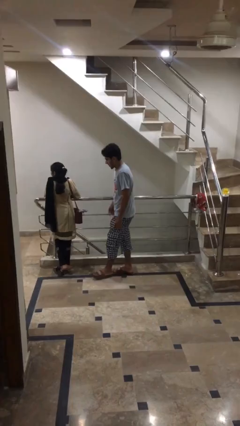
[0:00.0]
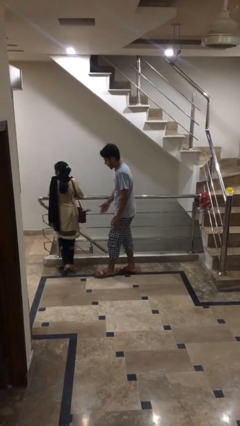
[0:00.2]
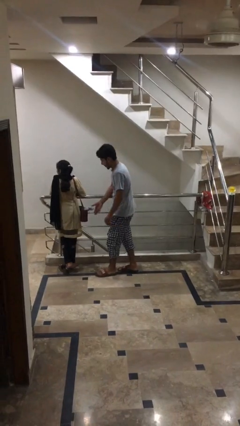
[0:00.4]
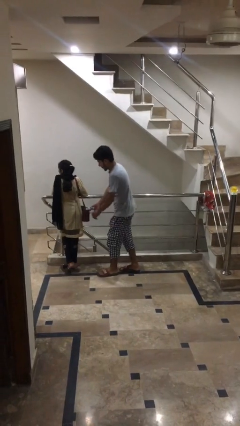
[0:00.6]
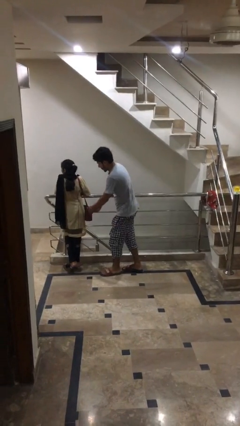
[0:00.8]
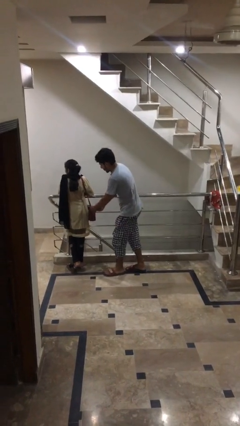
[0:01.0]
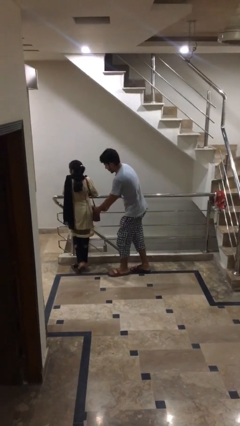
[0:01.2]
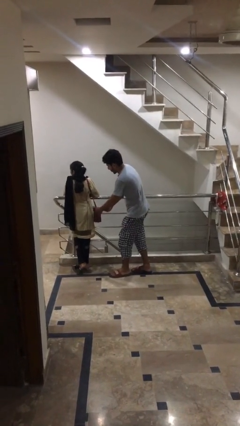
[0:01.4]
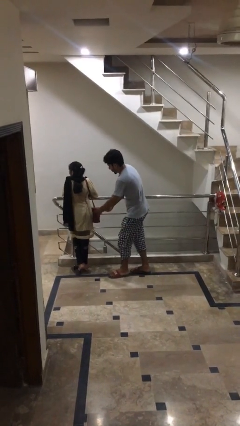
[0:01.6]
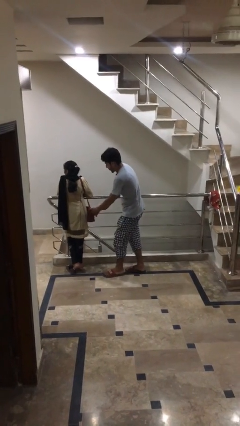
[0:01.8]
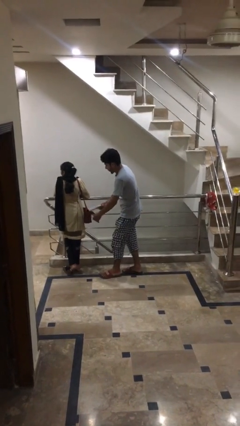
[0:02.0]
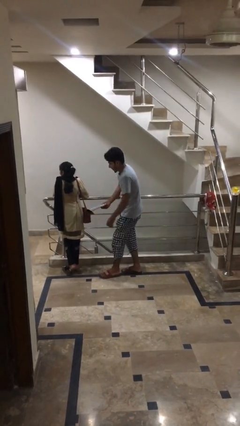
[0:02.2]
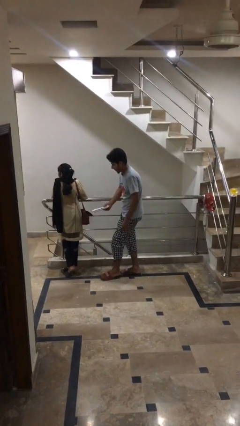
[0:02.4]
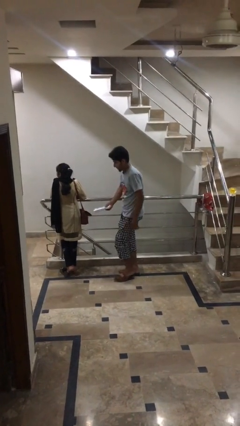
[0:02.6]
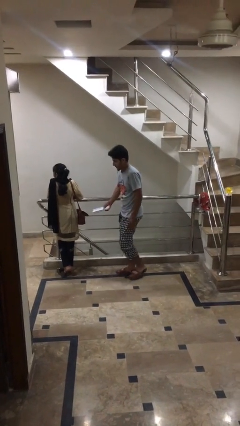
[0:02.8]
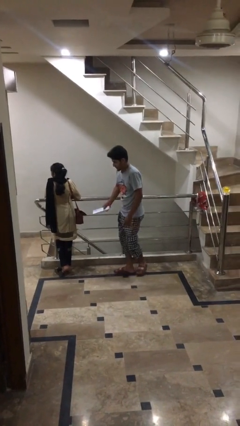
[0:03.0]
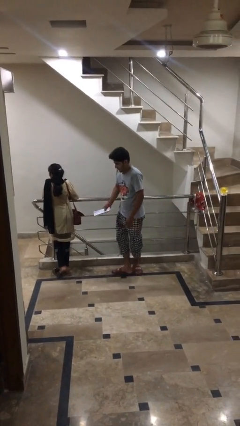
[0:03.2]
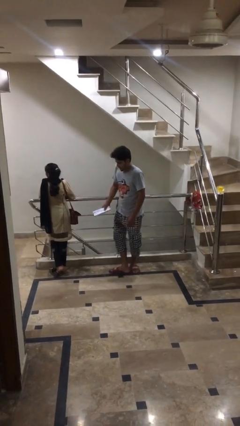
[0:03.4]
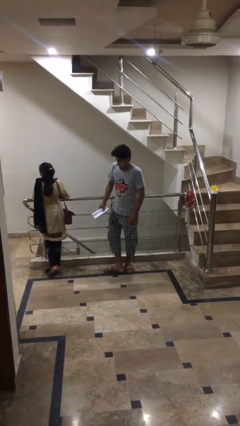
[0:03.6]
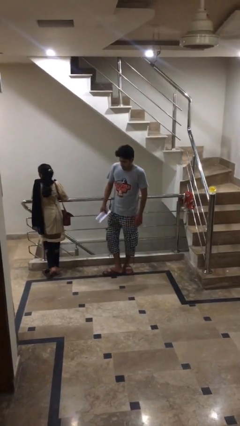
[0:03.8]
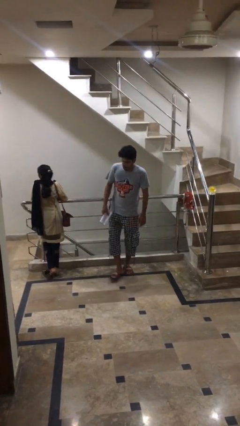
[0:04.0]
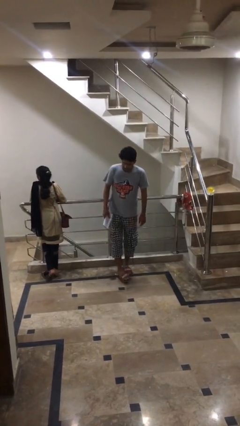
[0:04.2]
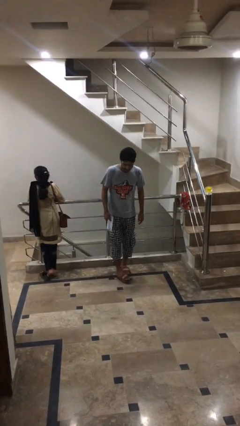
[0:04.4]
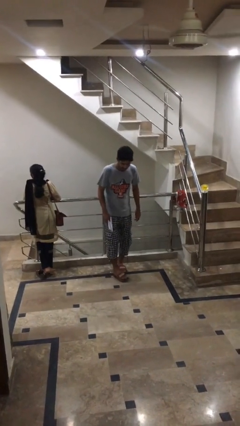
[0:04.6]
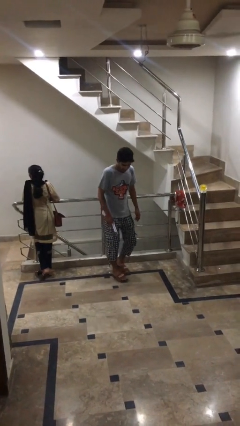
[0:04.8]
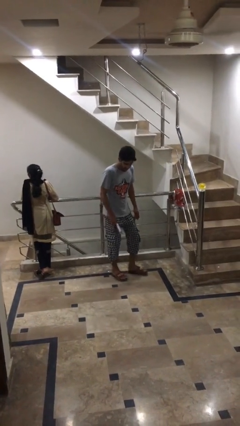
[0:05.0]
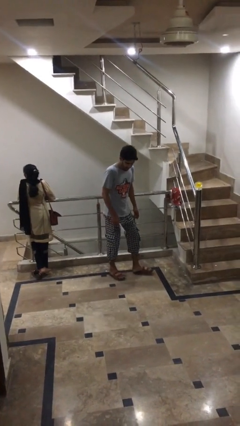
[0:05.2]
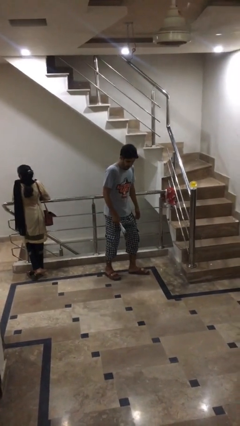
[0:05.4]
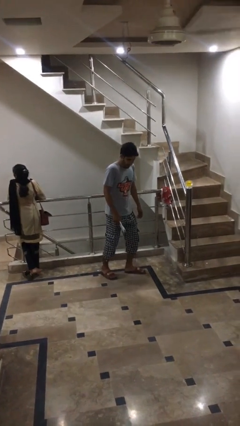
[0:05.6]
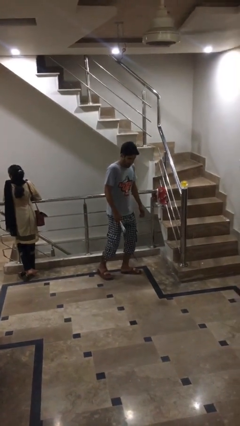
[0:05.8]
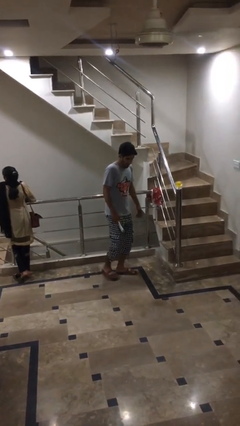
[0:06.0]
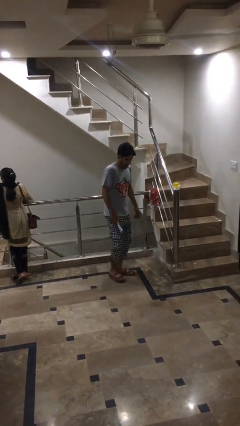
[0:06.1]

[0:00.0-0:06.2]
person steals object from person

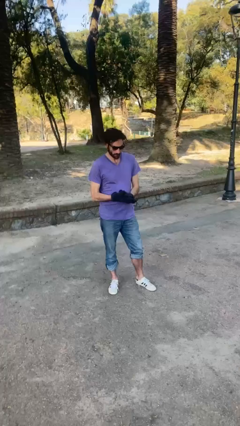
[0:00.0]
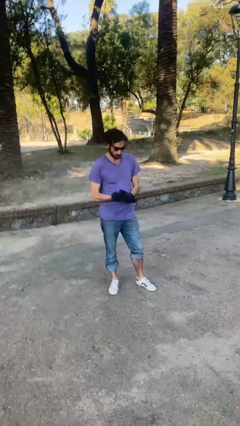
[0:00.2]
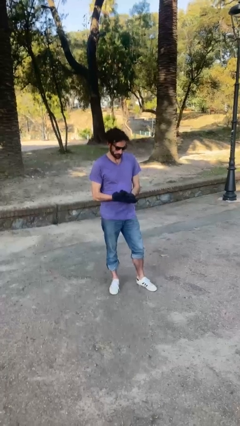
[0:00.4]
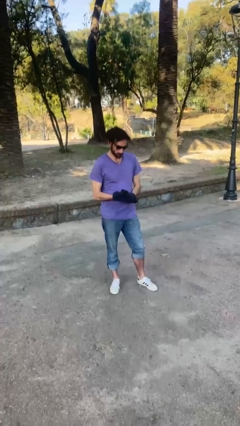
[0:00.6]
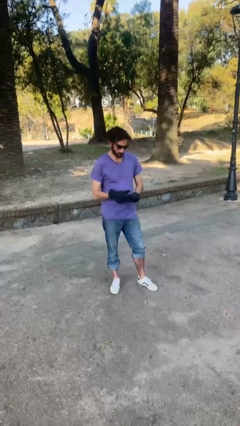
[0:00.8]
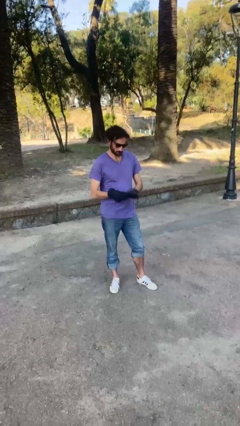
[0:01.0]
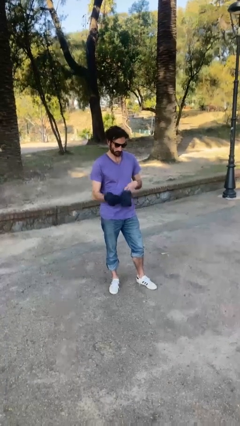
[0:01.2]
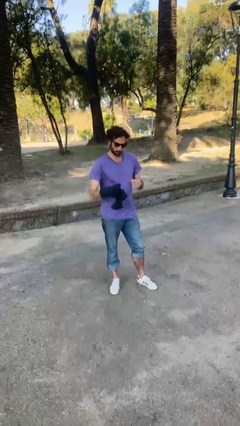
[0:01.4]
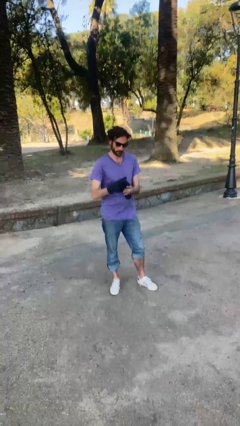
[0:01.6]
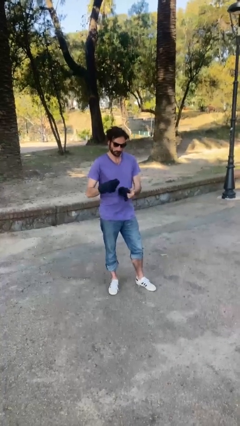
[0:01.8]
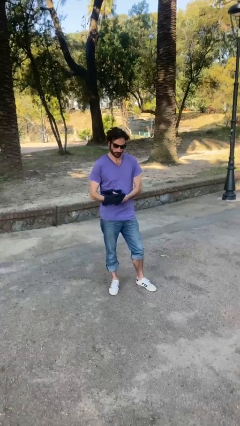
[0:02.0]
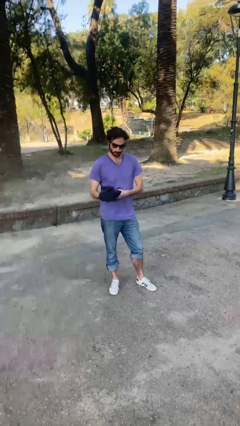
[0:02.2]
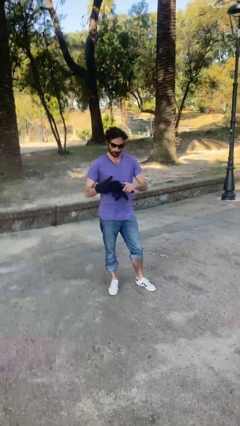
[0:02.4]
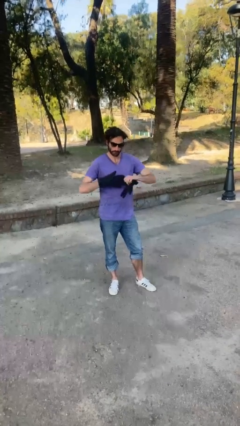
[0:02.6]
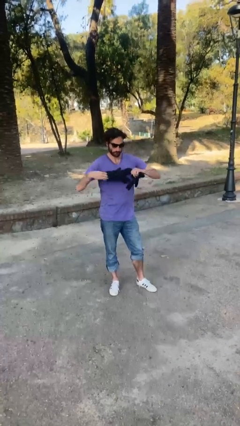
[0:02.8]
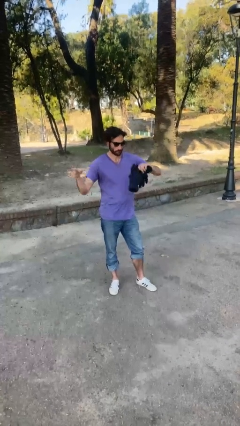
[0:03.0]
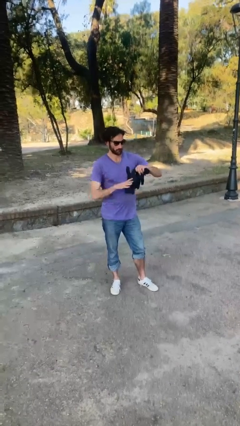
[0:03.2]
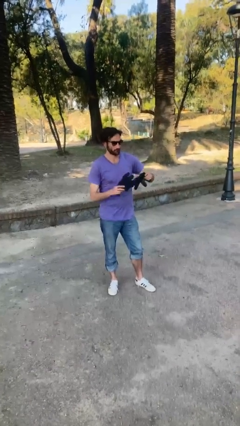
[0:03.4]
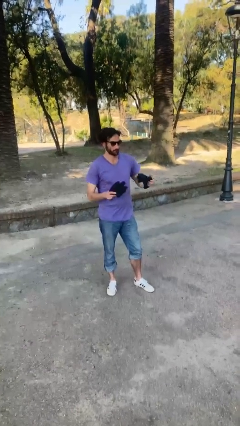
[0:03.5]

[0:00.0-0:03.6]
person takes off gloves

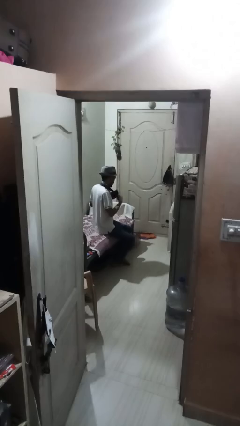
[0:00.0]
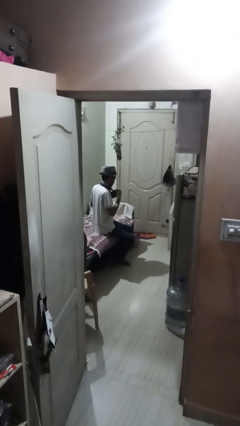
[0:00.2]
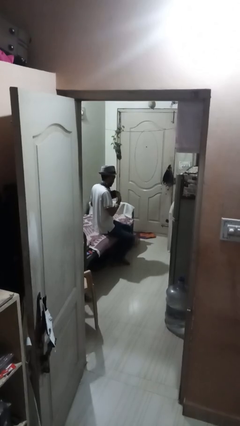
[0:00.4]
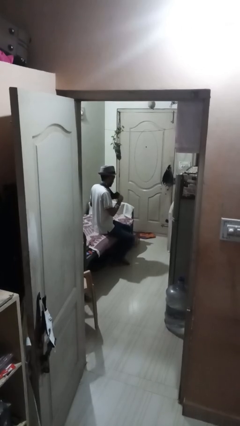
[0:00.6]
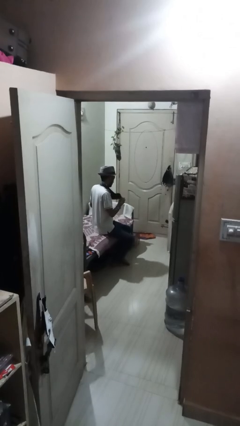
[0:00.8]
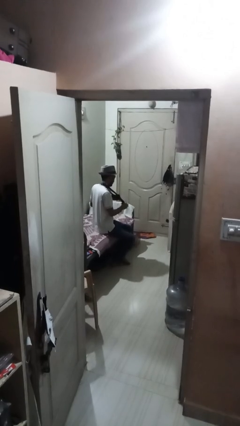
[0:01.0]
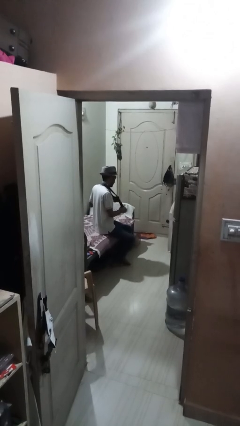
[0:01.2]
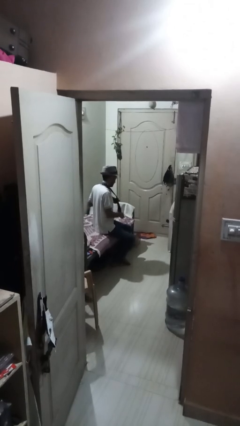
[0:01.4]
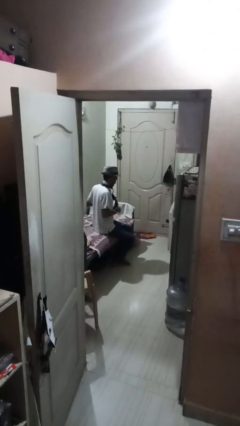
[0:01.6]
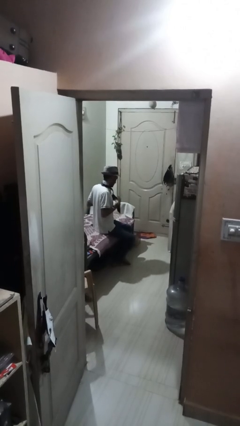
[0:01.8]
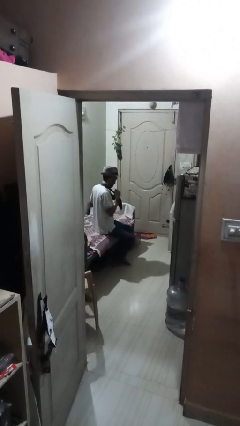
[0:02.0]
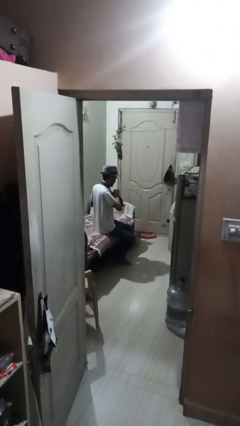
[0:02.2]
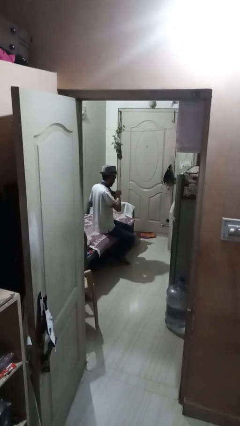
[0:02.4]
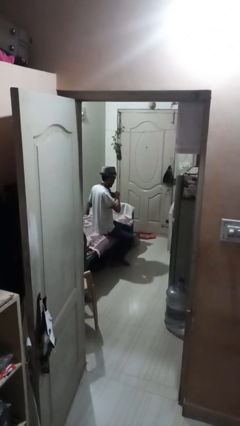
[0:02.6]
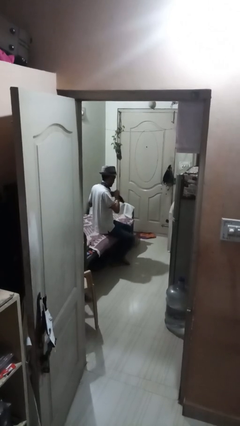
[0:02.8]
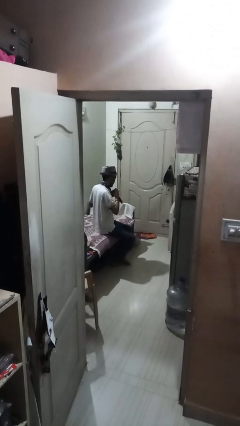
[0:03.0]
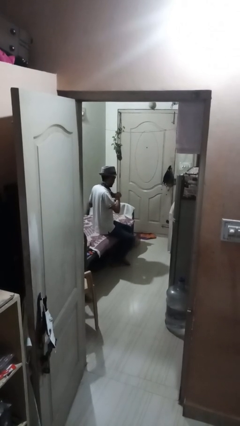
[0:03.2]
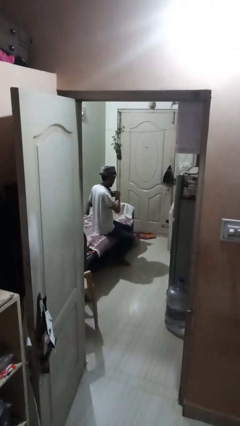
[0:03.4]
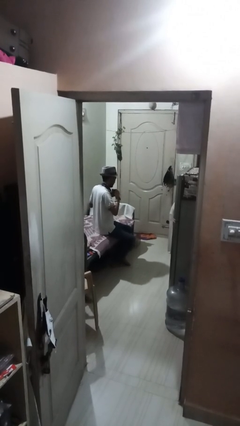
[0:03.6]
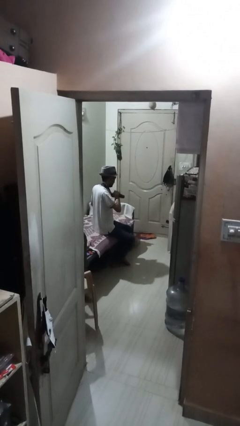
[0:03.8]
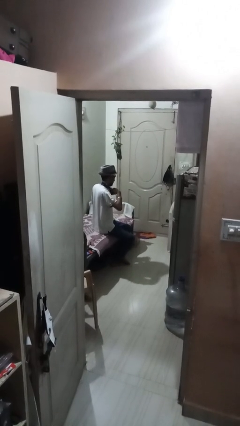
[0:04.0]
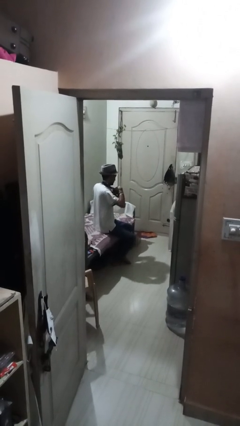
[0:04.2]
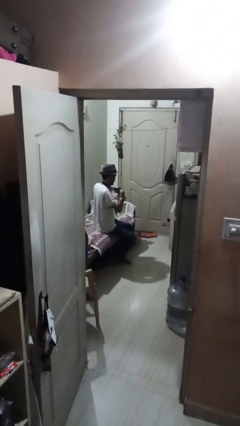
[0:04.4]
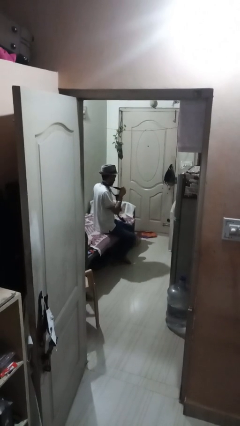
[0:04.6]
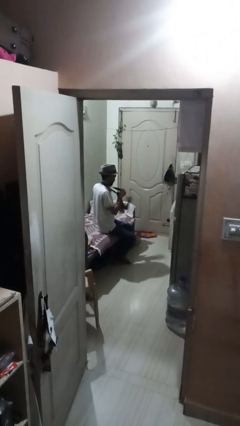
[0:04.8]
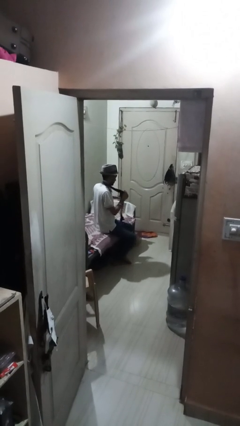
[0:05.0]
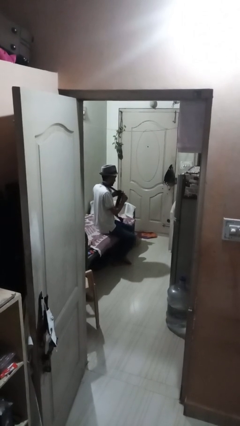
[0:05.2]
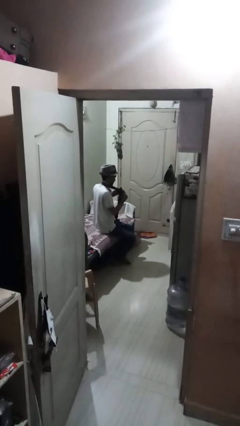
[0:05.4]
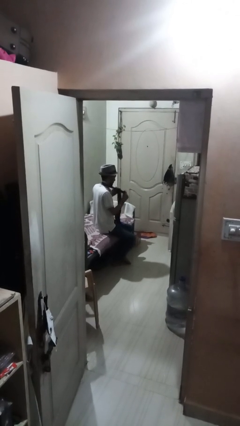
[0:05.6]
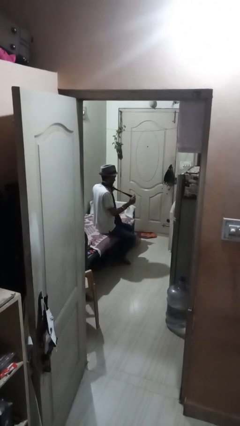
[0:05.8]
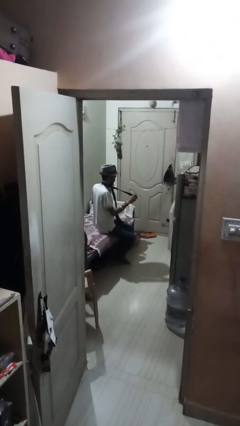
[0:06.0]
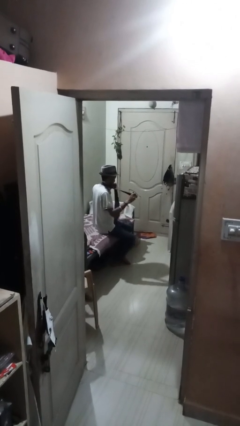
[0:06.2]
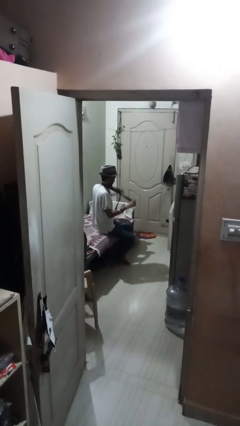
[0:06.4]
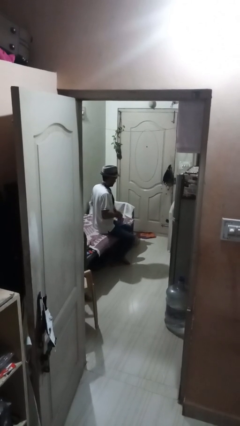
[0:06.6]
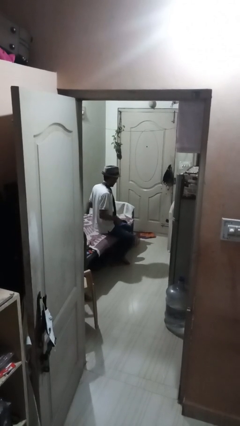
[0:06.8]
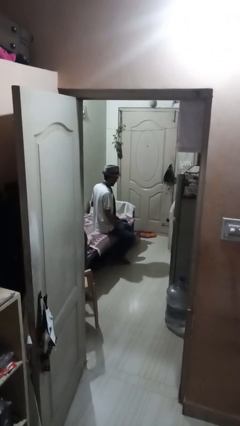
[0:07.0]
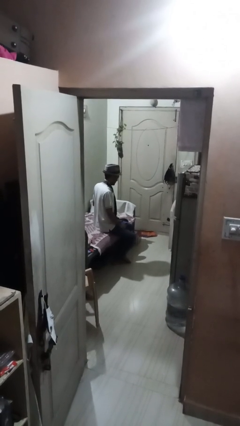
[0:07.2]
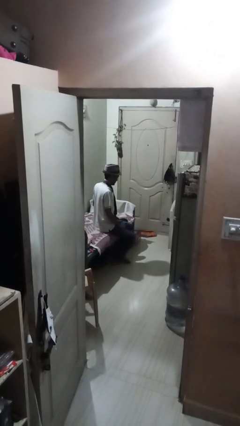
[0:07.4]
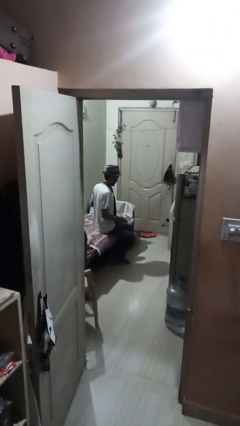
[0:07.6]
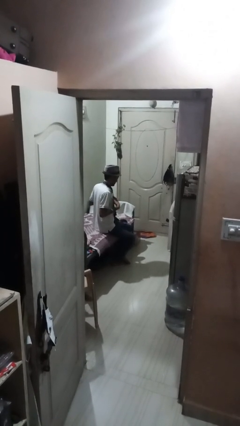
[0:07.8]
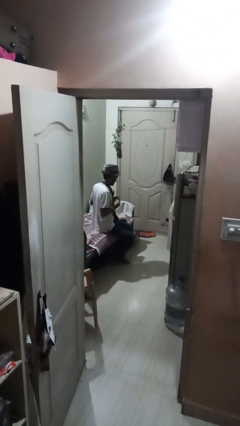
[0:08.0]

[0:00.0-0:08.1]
person takes off necktie

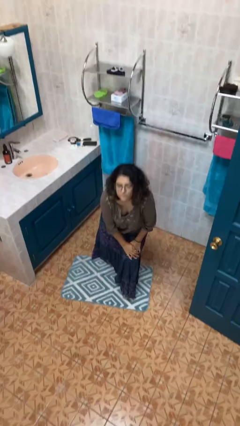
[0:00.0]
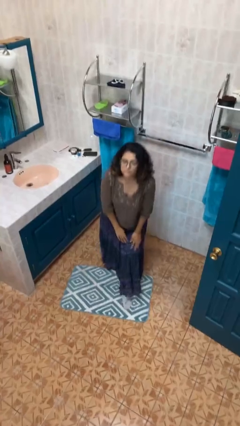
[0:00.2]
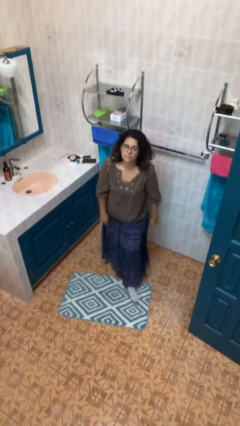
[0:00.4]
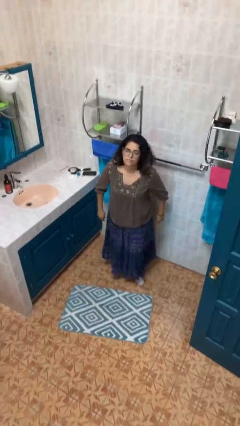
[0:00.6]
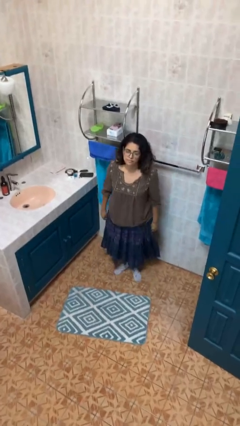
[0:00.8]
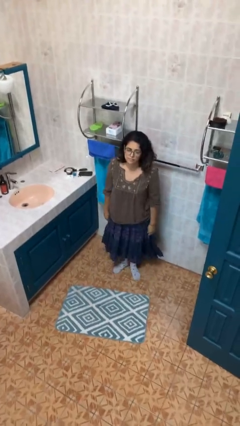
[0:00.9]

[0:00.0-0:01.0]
person stands up from floor
